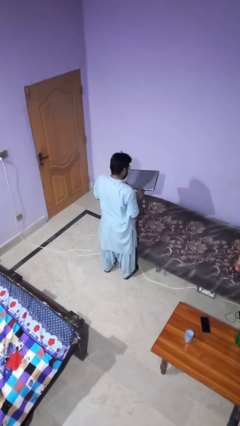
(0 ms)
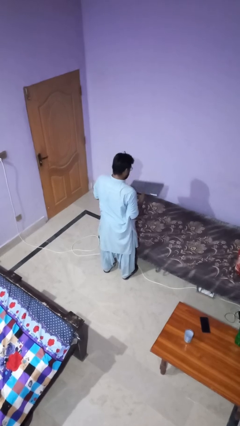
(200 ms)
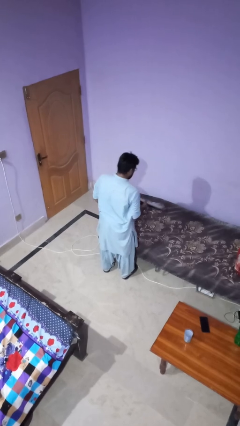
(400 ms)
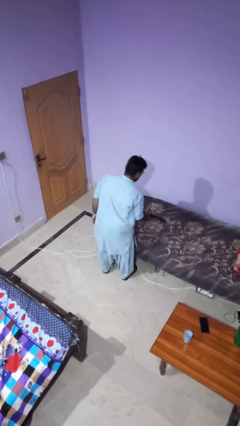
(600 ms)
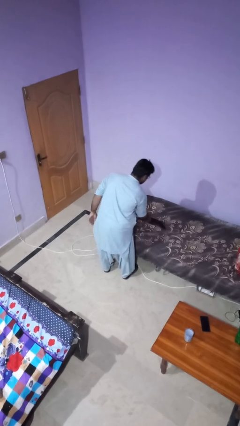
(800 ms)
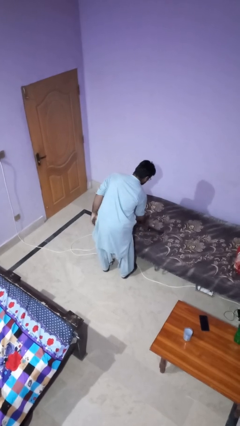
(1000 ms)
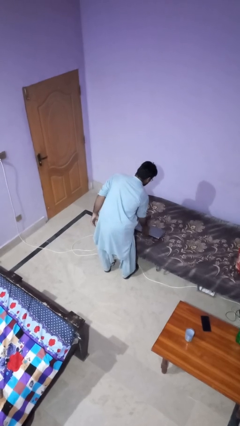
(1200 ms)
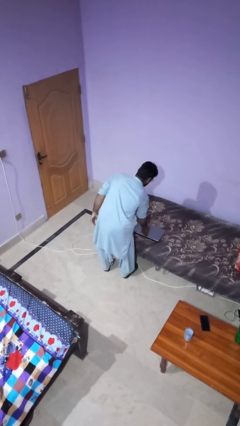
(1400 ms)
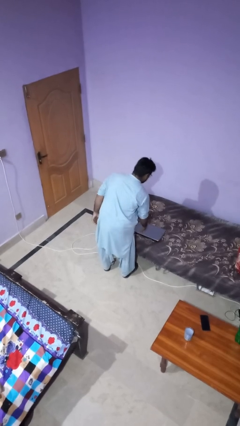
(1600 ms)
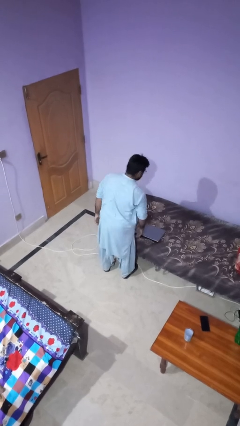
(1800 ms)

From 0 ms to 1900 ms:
person puts down object on bed

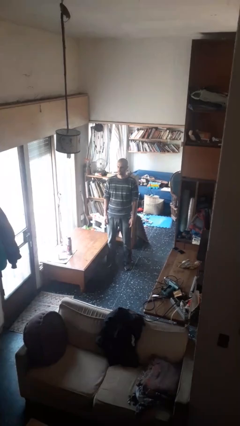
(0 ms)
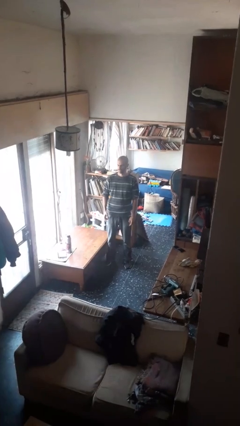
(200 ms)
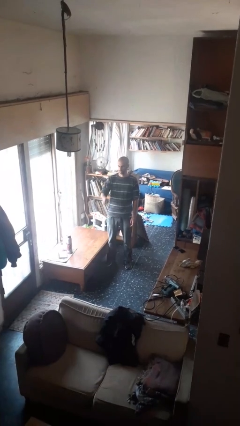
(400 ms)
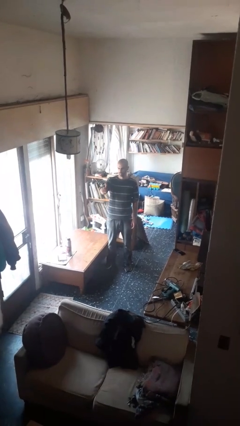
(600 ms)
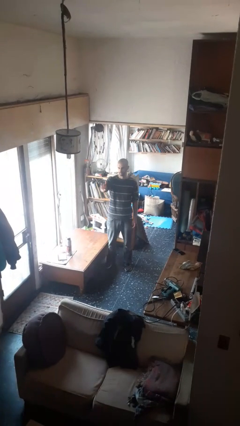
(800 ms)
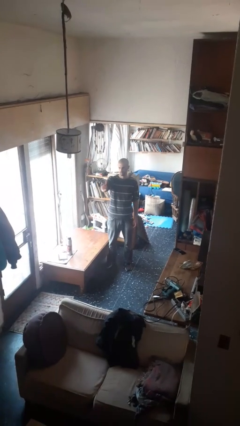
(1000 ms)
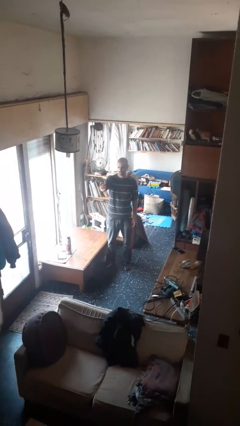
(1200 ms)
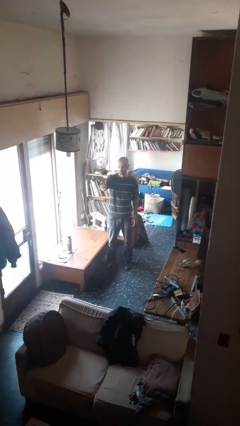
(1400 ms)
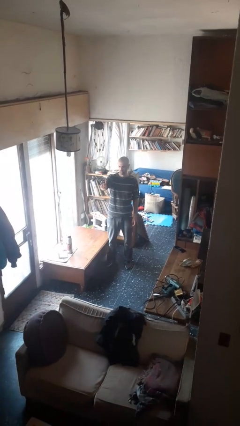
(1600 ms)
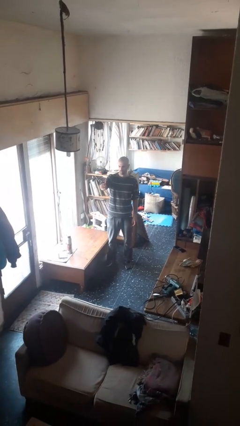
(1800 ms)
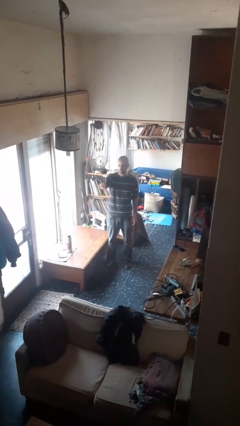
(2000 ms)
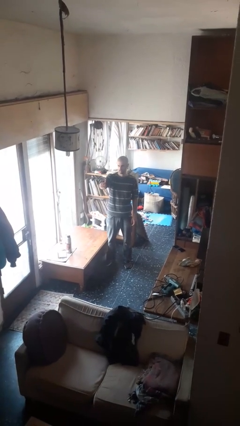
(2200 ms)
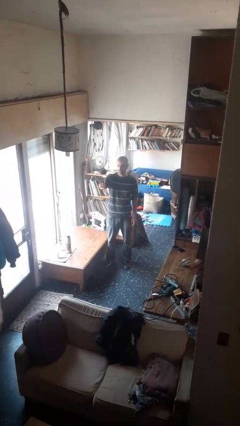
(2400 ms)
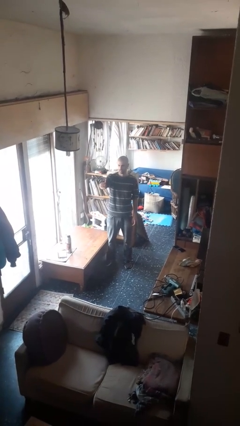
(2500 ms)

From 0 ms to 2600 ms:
person gestures number one

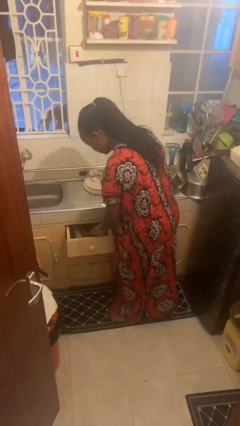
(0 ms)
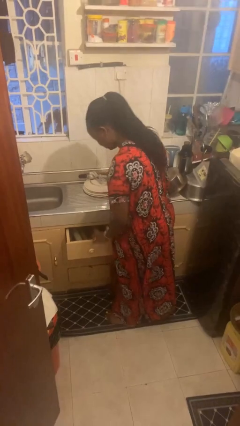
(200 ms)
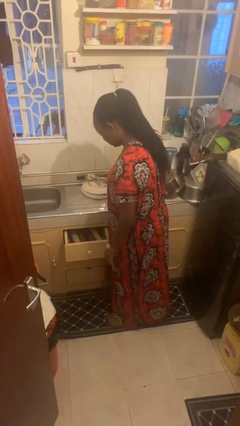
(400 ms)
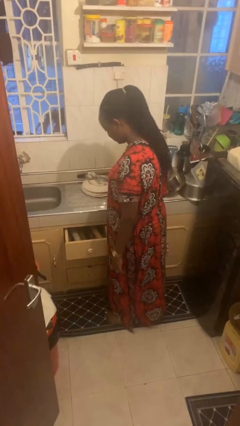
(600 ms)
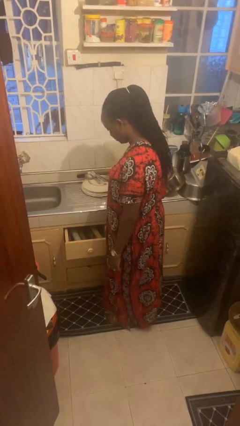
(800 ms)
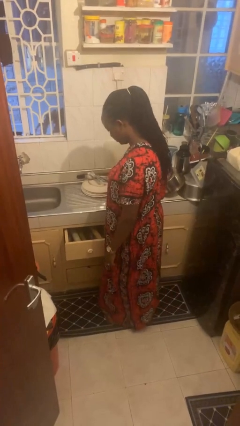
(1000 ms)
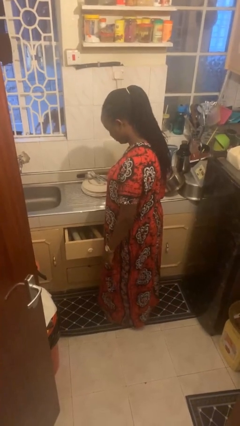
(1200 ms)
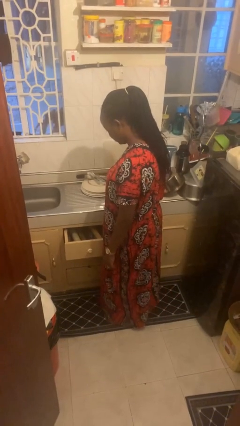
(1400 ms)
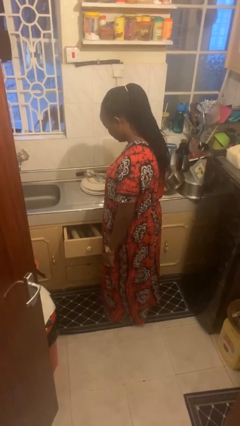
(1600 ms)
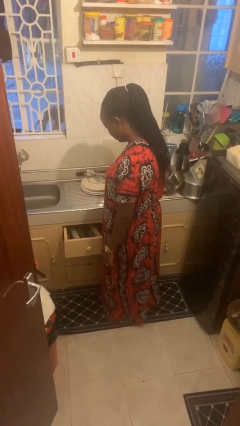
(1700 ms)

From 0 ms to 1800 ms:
person searches in kitchen drawer

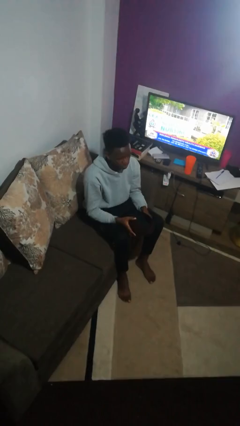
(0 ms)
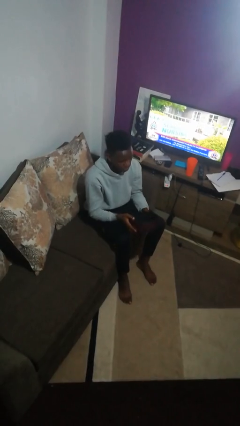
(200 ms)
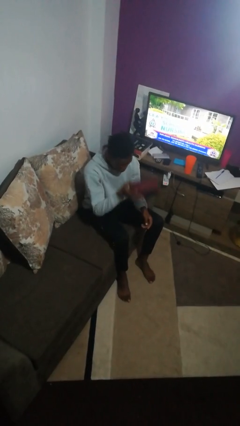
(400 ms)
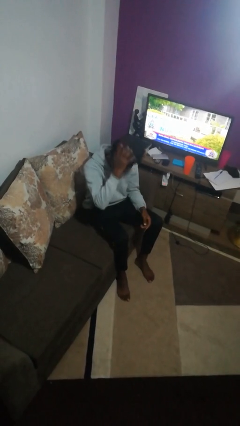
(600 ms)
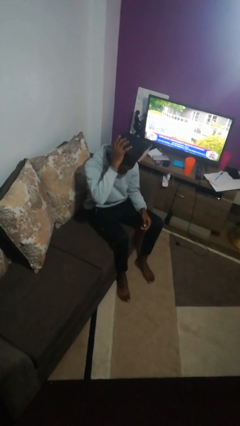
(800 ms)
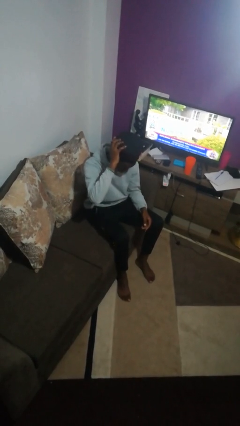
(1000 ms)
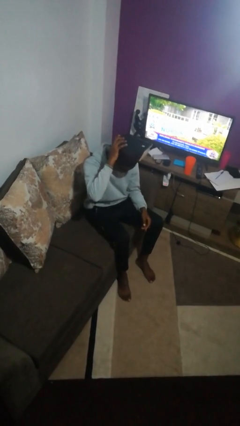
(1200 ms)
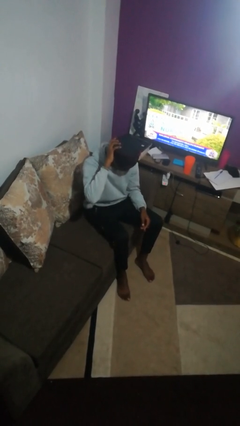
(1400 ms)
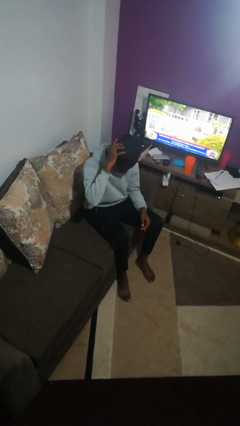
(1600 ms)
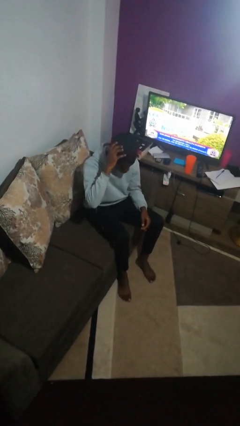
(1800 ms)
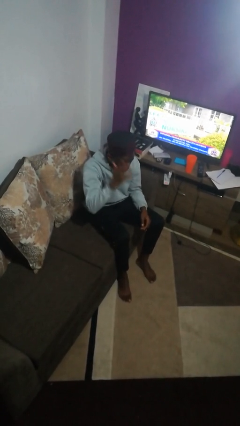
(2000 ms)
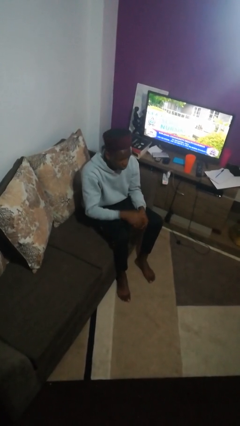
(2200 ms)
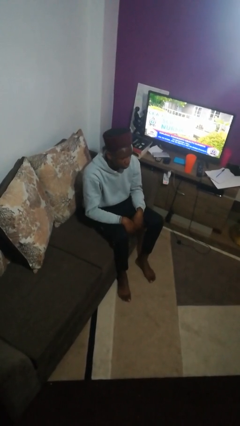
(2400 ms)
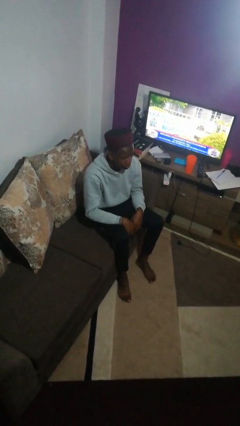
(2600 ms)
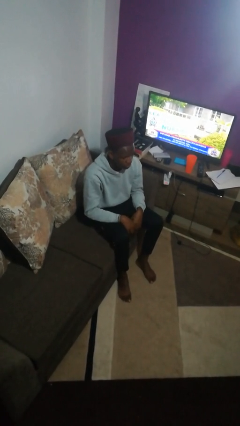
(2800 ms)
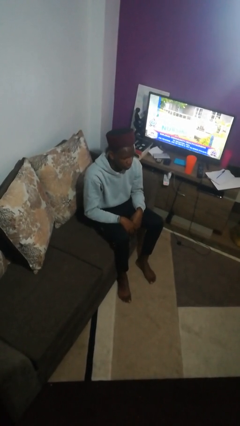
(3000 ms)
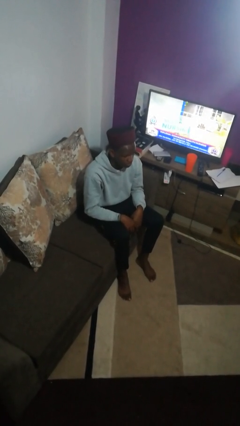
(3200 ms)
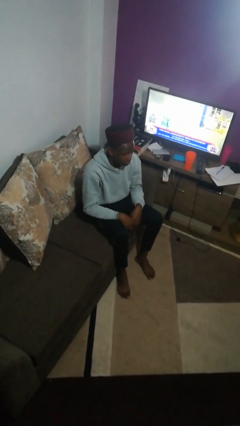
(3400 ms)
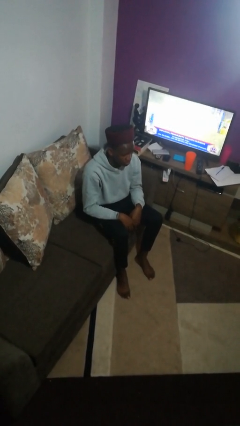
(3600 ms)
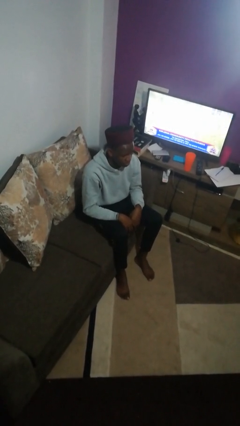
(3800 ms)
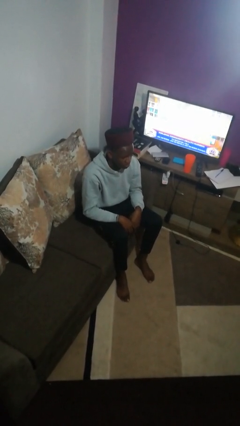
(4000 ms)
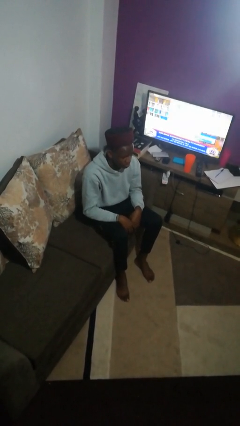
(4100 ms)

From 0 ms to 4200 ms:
person puts on hat

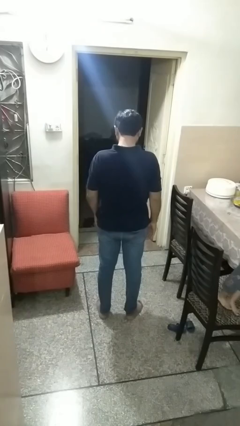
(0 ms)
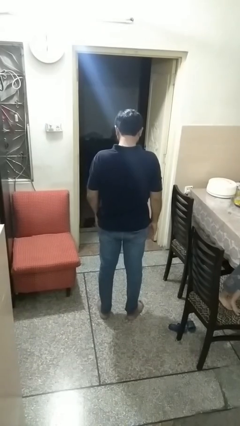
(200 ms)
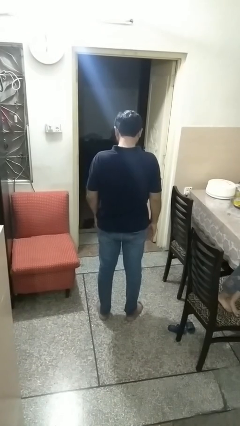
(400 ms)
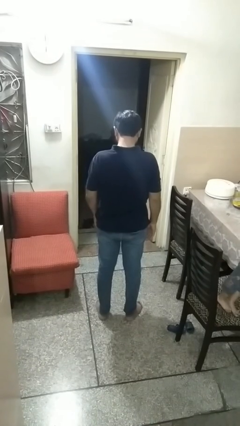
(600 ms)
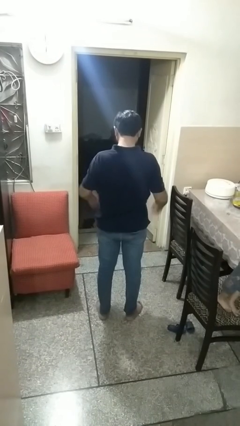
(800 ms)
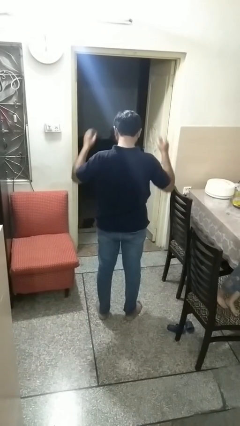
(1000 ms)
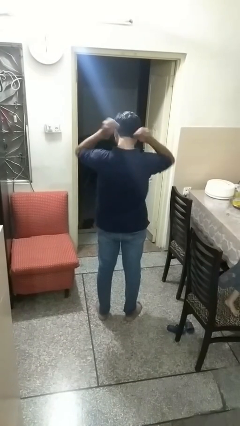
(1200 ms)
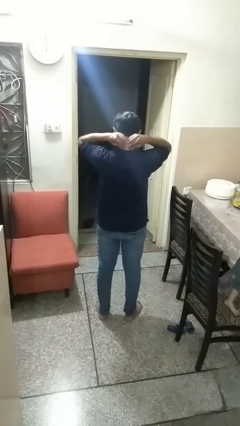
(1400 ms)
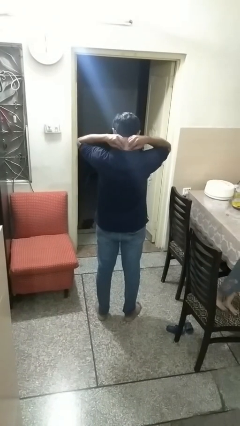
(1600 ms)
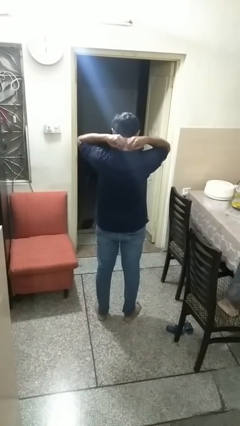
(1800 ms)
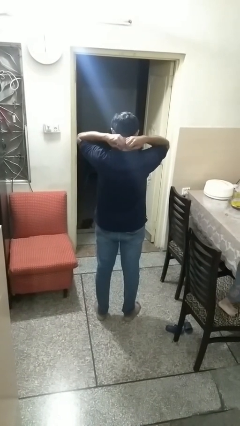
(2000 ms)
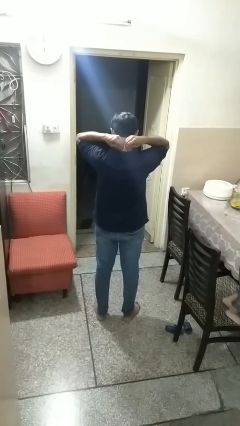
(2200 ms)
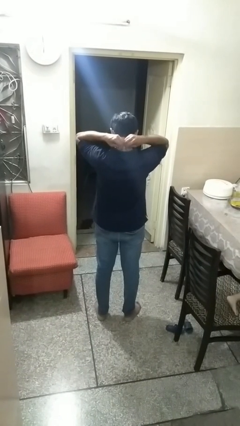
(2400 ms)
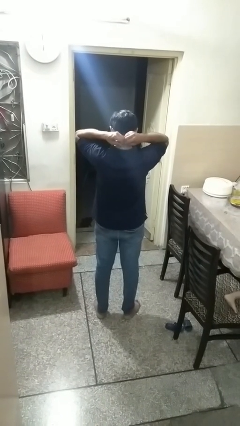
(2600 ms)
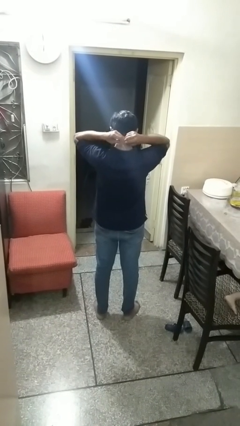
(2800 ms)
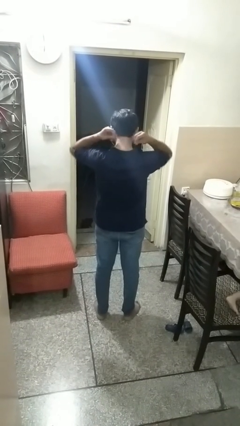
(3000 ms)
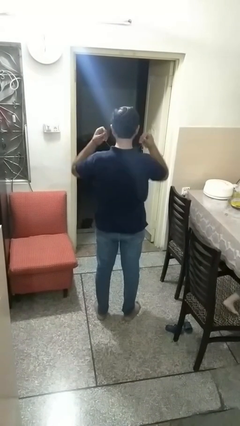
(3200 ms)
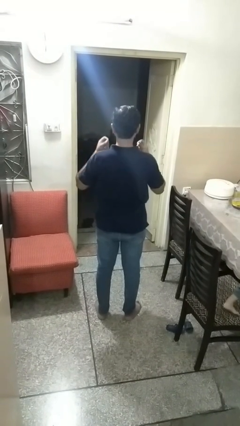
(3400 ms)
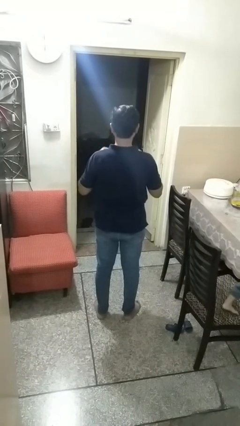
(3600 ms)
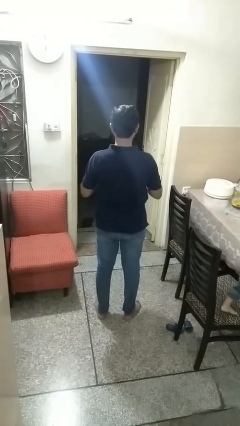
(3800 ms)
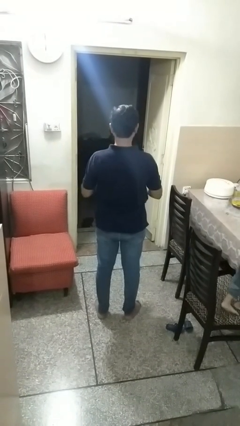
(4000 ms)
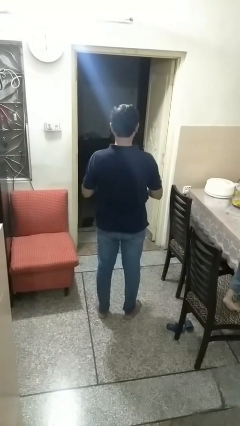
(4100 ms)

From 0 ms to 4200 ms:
person takes off necklace

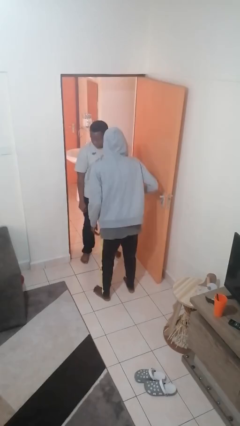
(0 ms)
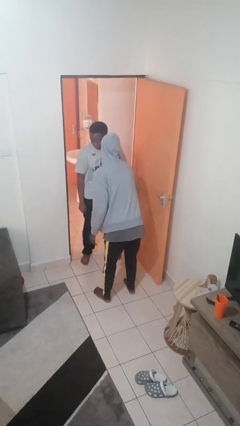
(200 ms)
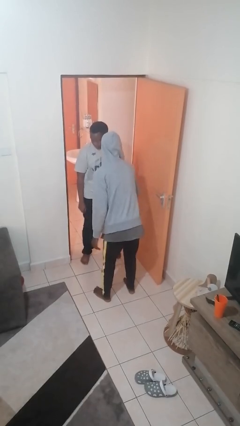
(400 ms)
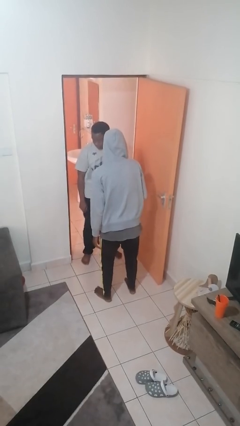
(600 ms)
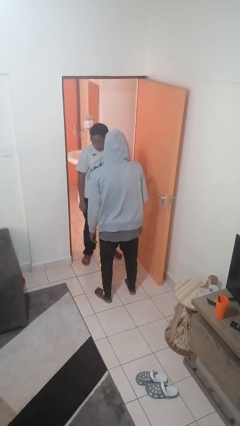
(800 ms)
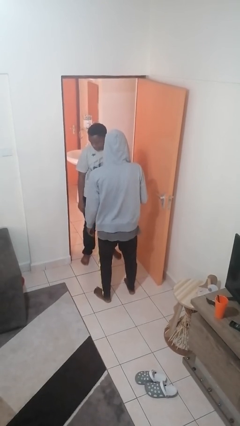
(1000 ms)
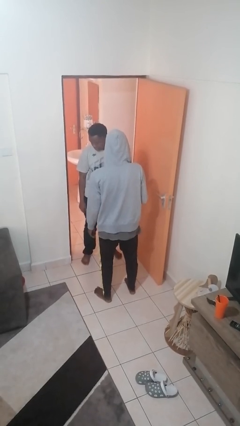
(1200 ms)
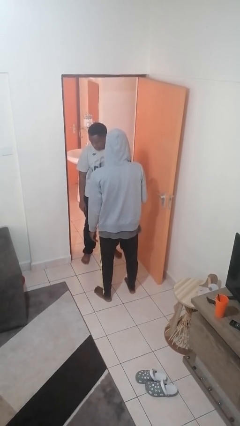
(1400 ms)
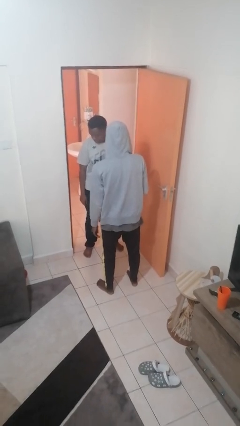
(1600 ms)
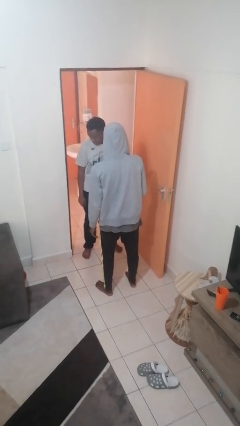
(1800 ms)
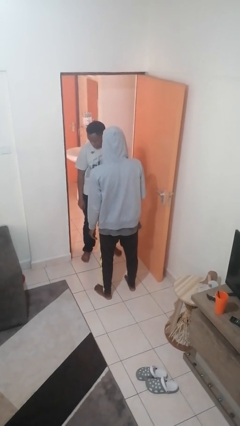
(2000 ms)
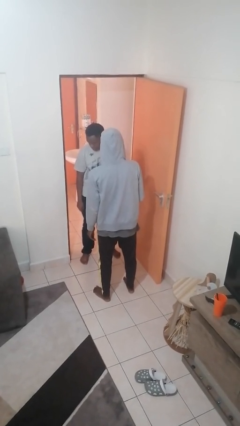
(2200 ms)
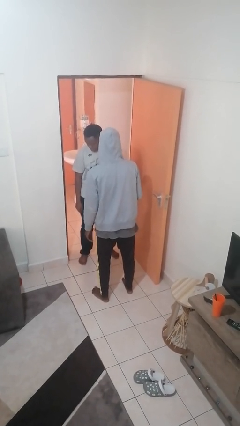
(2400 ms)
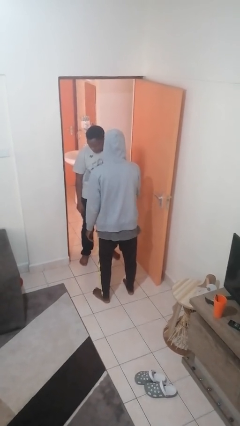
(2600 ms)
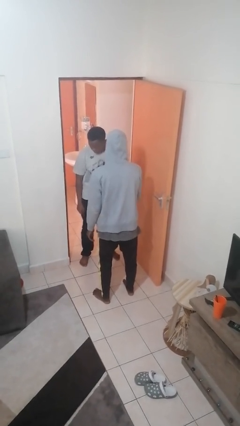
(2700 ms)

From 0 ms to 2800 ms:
person grabs person by forearm
